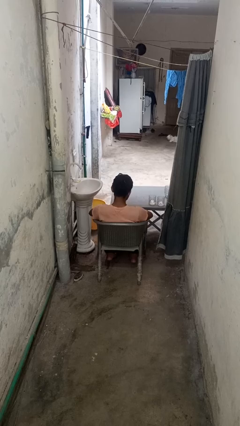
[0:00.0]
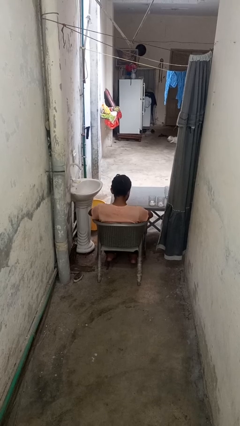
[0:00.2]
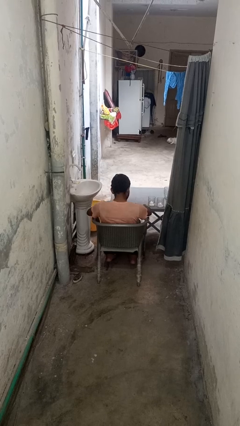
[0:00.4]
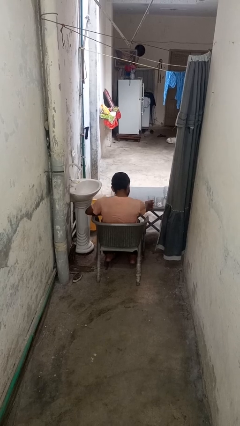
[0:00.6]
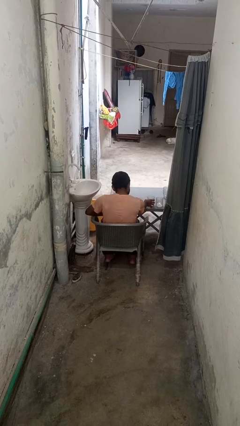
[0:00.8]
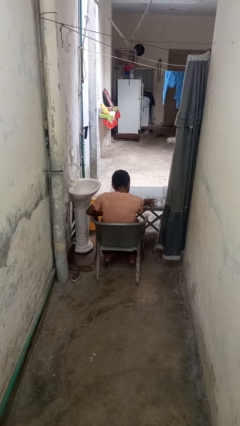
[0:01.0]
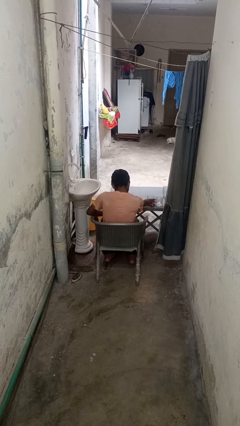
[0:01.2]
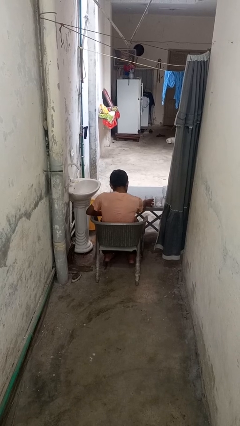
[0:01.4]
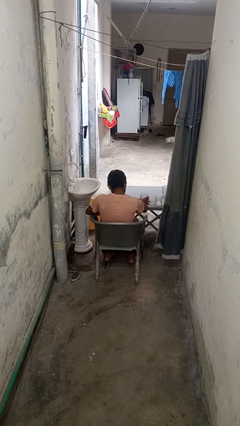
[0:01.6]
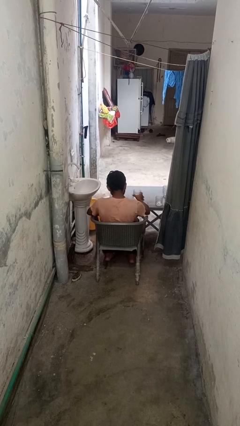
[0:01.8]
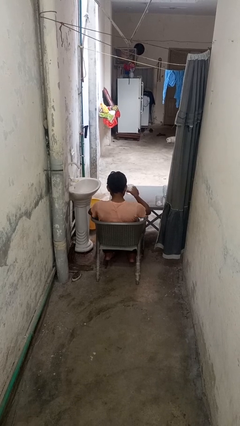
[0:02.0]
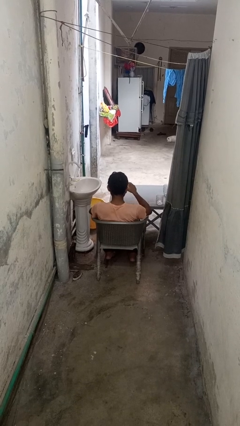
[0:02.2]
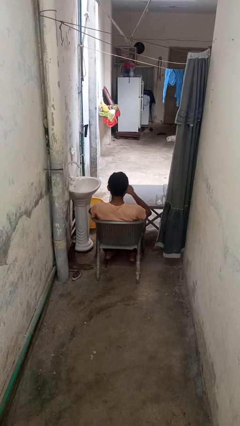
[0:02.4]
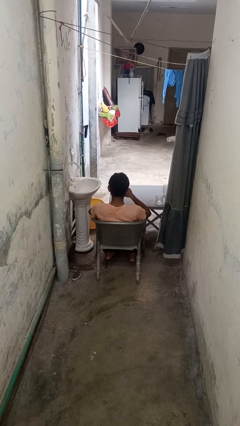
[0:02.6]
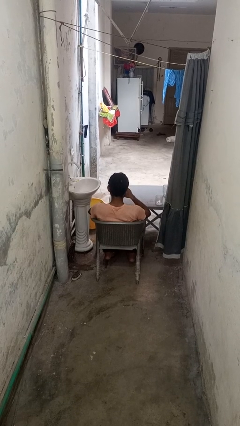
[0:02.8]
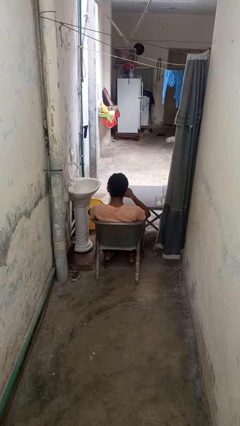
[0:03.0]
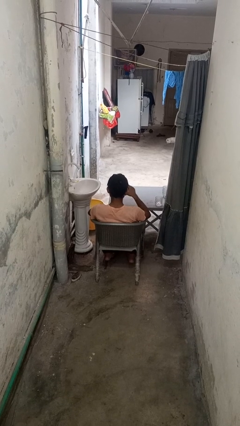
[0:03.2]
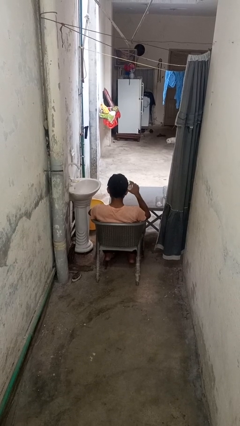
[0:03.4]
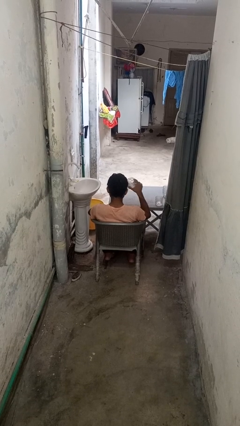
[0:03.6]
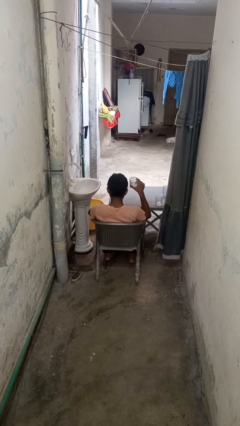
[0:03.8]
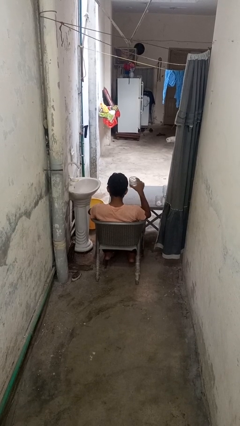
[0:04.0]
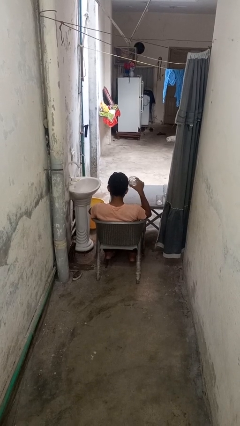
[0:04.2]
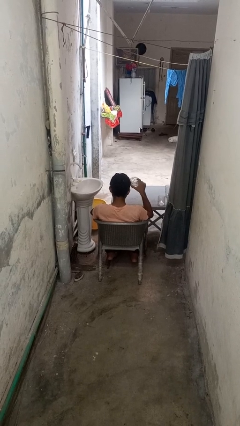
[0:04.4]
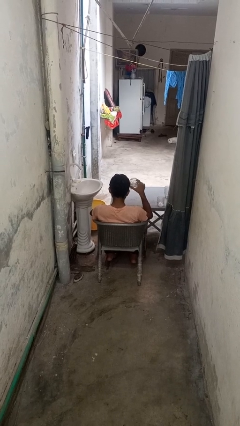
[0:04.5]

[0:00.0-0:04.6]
person picks up object from table

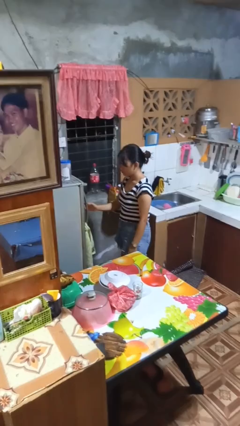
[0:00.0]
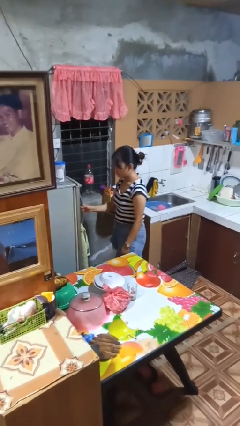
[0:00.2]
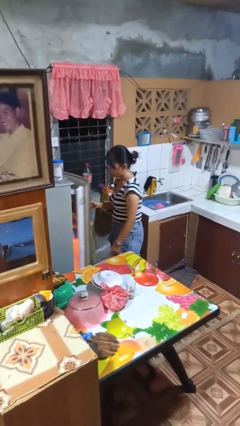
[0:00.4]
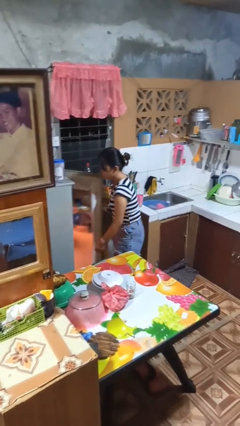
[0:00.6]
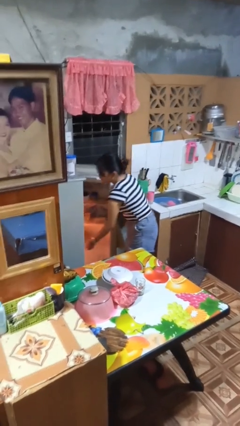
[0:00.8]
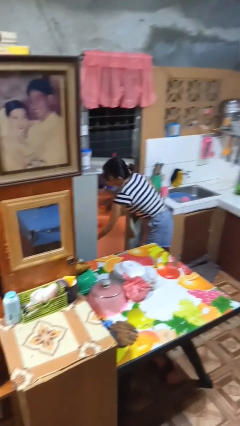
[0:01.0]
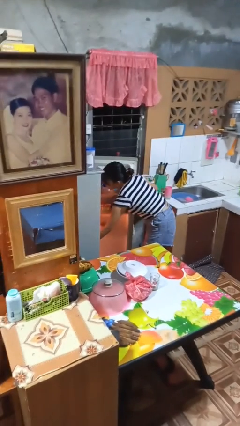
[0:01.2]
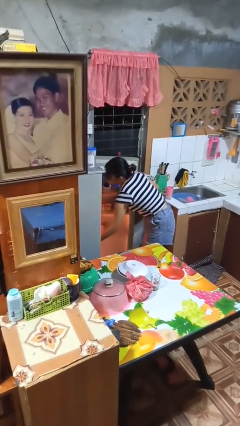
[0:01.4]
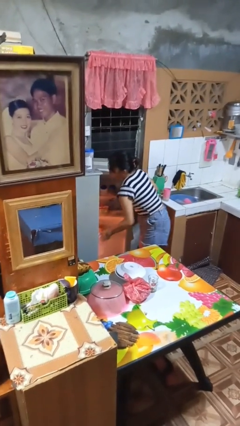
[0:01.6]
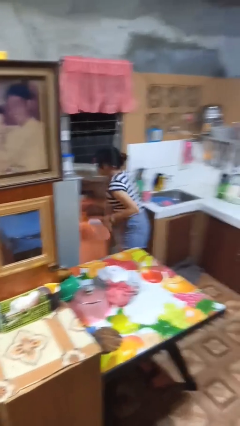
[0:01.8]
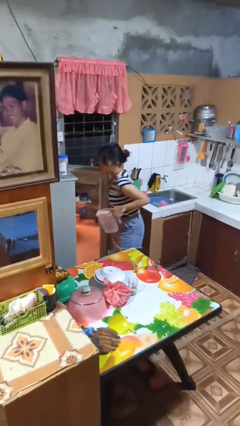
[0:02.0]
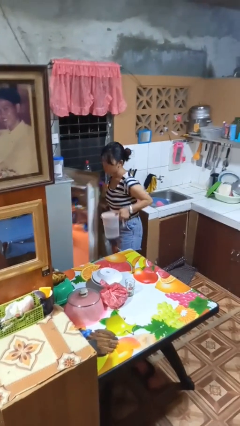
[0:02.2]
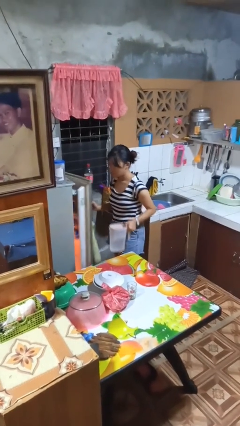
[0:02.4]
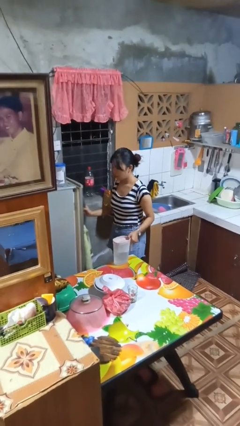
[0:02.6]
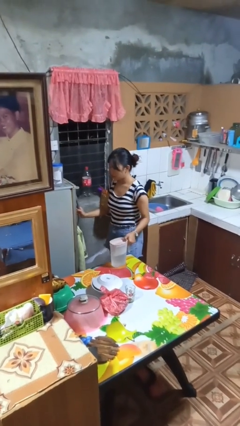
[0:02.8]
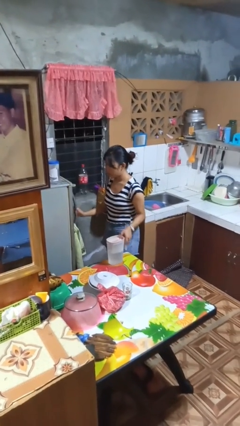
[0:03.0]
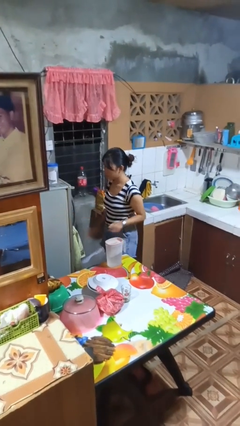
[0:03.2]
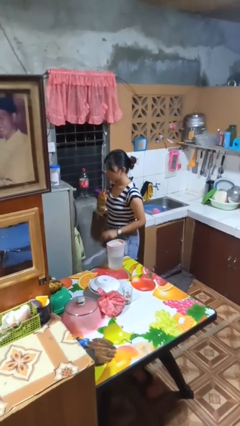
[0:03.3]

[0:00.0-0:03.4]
person takes object from refrigerator

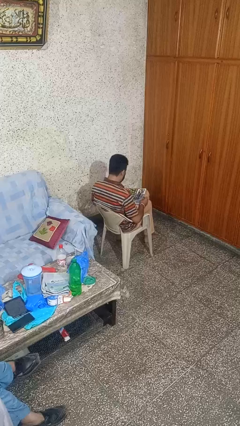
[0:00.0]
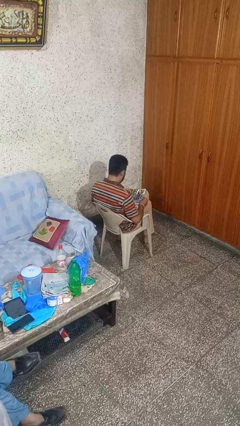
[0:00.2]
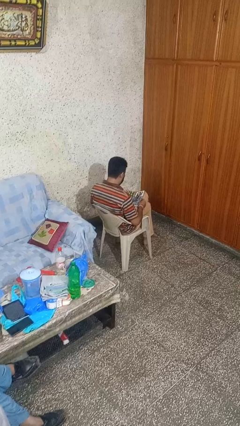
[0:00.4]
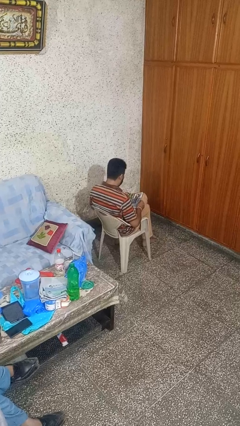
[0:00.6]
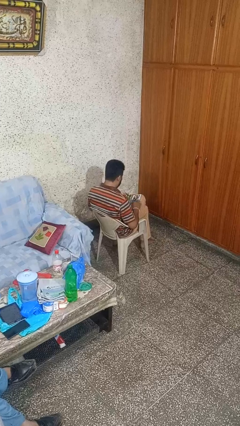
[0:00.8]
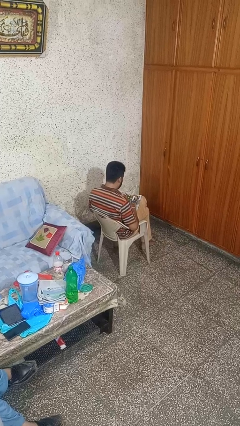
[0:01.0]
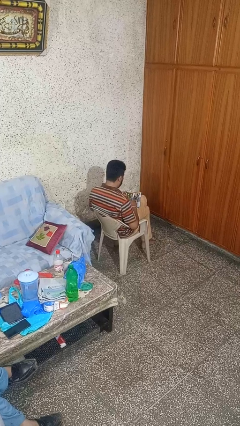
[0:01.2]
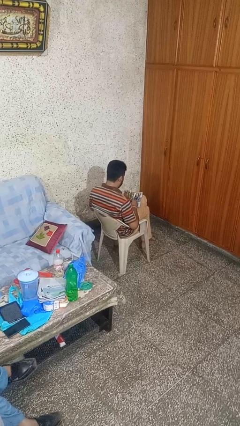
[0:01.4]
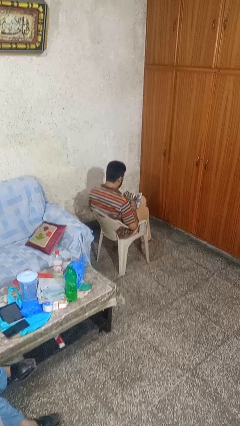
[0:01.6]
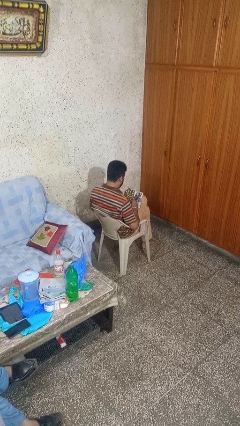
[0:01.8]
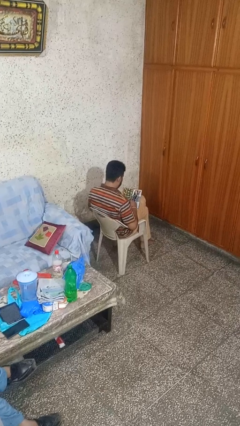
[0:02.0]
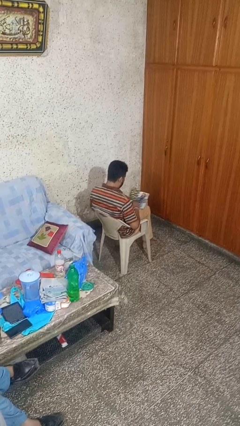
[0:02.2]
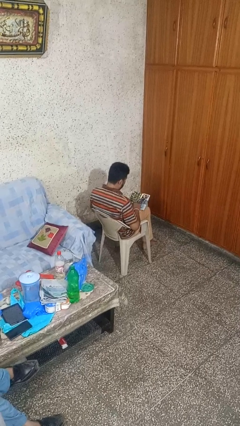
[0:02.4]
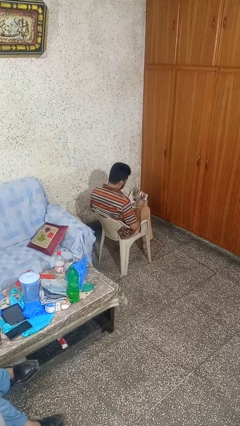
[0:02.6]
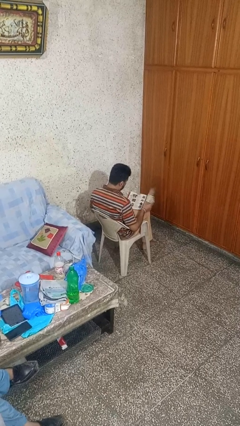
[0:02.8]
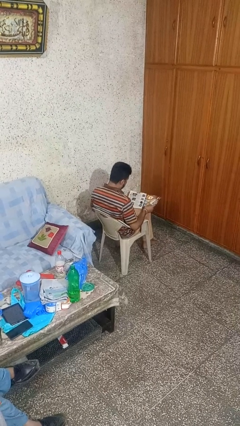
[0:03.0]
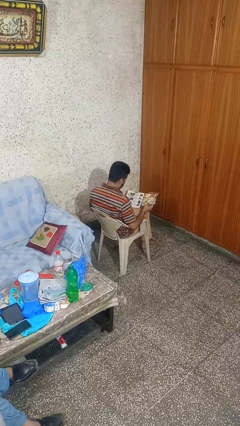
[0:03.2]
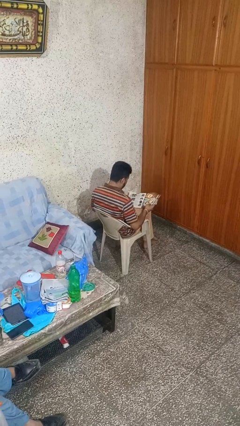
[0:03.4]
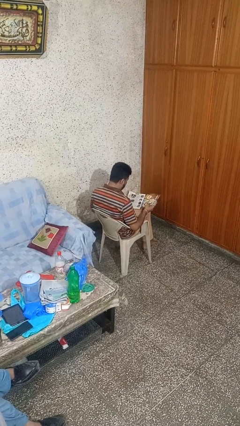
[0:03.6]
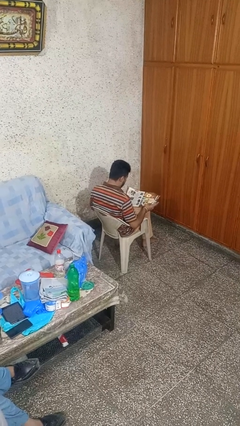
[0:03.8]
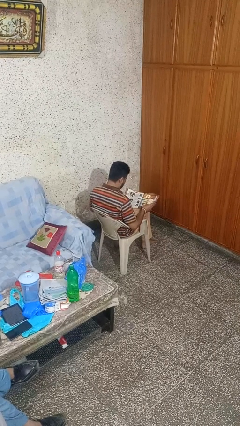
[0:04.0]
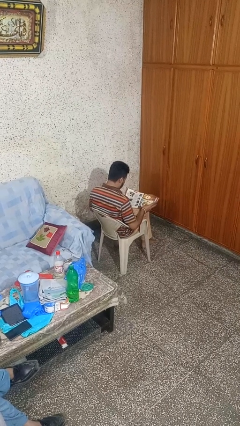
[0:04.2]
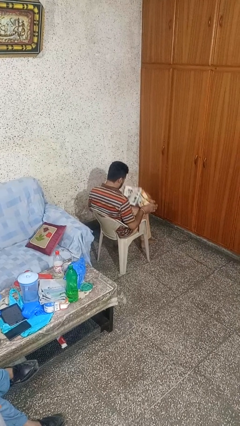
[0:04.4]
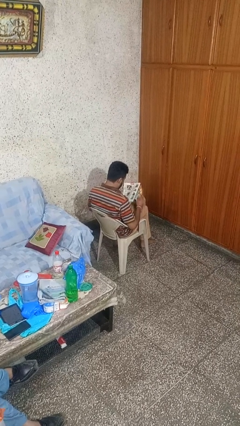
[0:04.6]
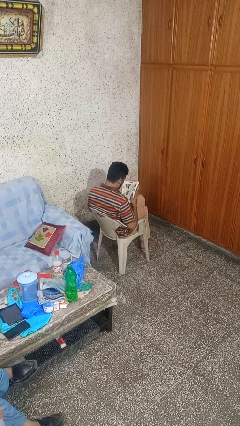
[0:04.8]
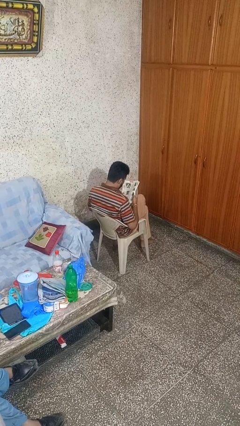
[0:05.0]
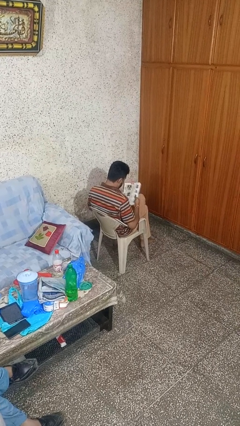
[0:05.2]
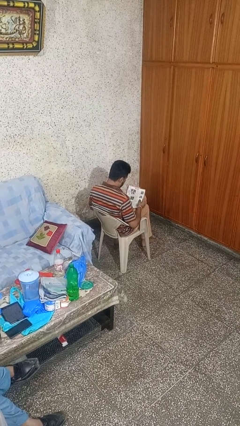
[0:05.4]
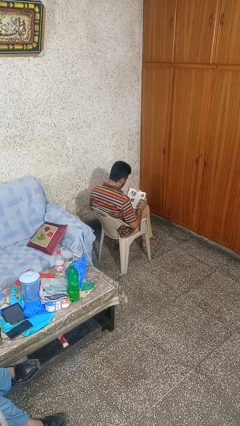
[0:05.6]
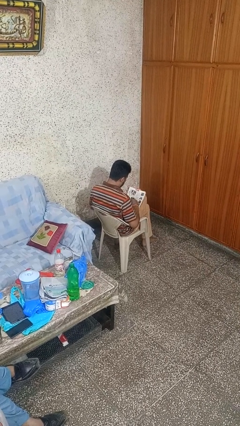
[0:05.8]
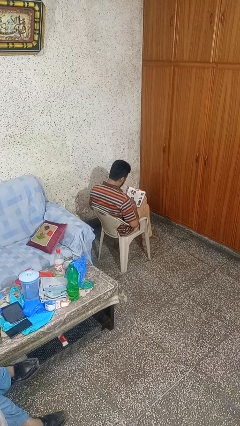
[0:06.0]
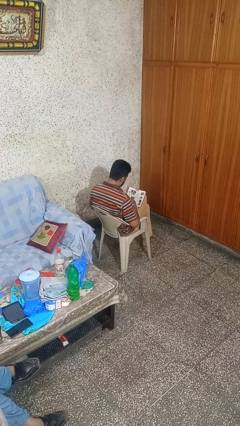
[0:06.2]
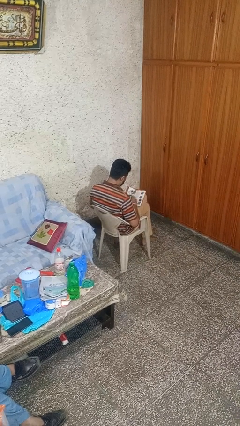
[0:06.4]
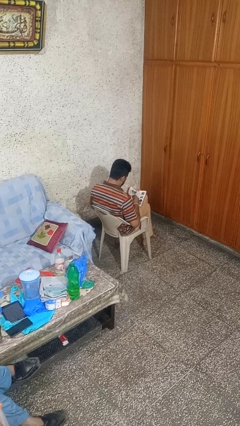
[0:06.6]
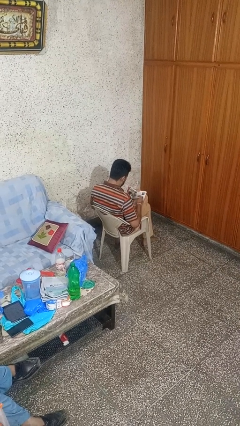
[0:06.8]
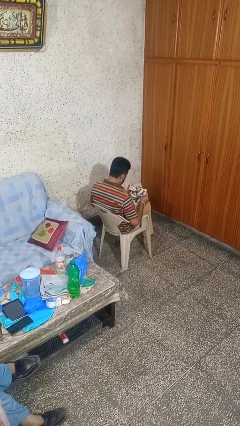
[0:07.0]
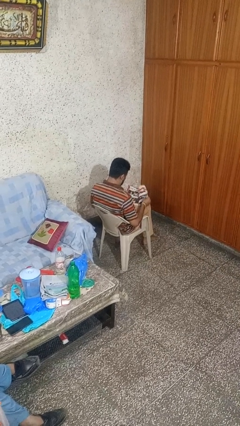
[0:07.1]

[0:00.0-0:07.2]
person reads magazine

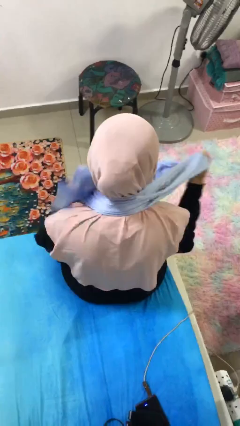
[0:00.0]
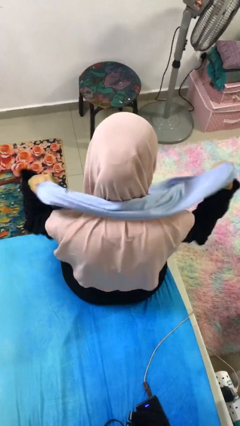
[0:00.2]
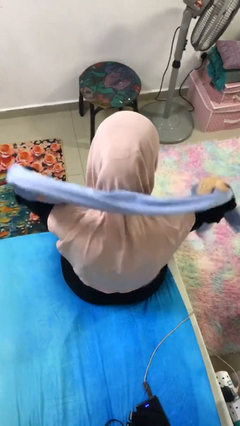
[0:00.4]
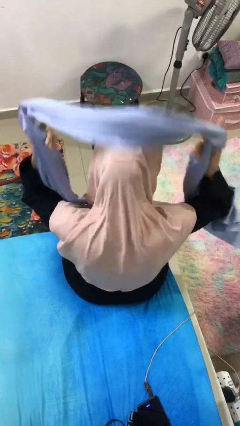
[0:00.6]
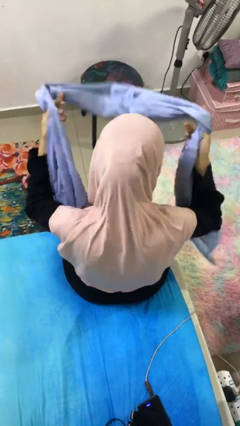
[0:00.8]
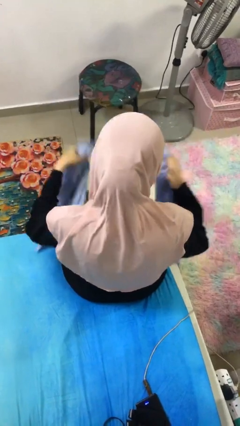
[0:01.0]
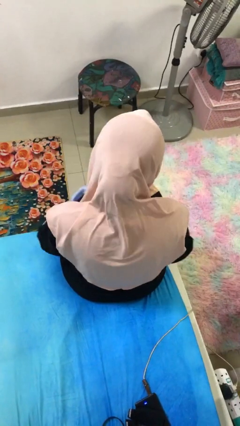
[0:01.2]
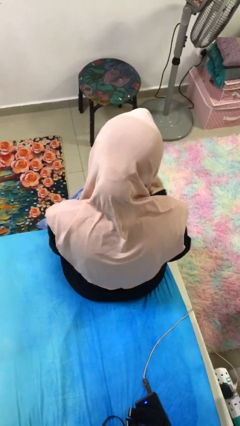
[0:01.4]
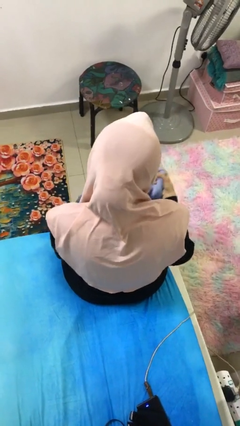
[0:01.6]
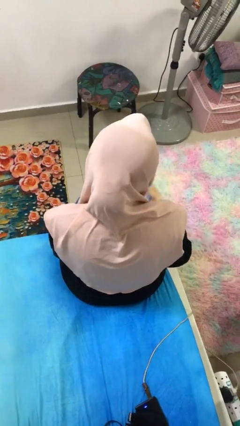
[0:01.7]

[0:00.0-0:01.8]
person takes off scarf

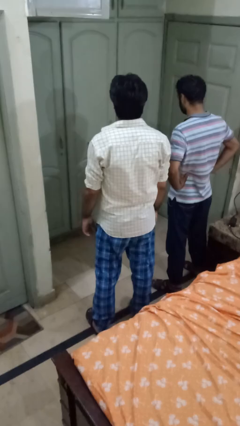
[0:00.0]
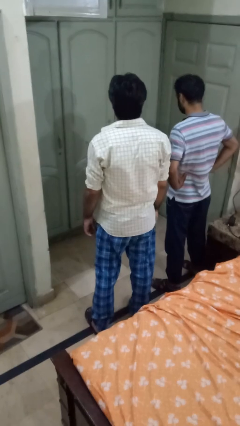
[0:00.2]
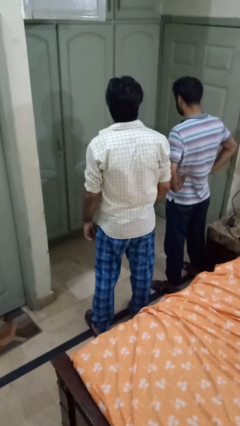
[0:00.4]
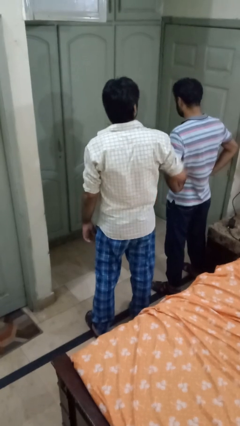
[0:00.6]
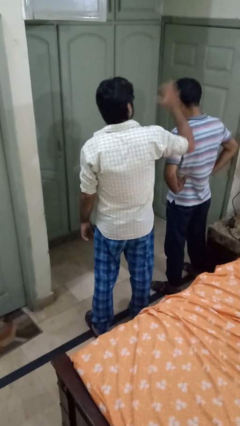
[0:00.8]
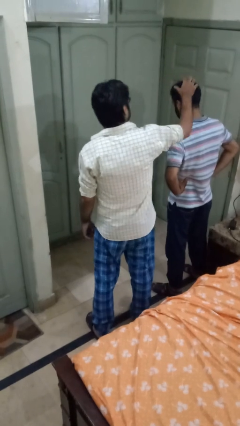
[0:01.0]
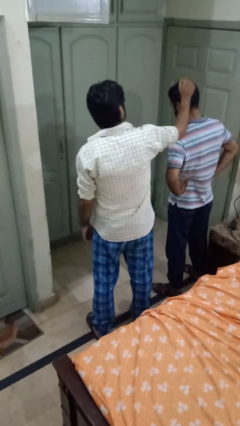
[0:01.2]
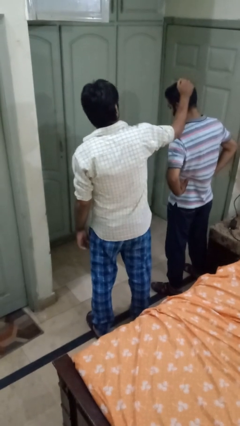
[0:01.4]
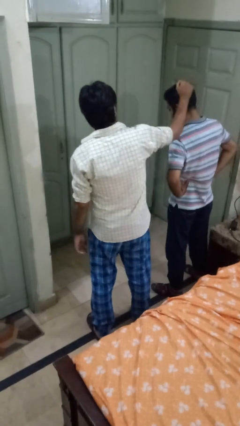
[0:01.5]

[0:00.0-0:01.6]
person grabs person by hair
